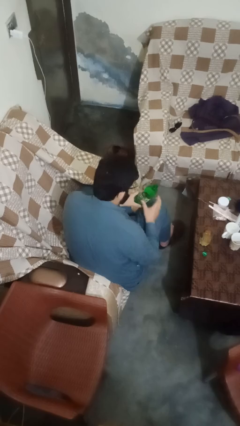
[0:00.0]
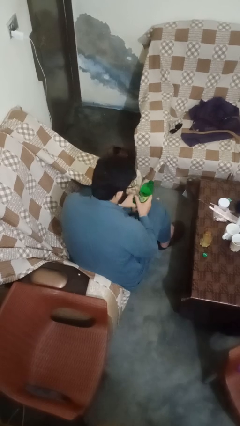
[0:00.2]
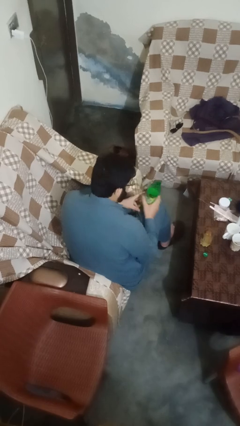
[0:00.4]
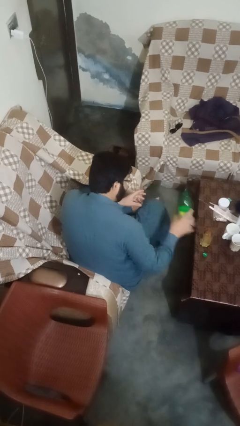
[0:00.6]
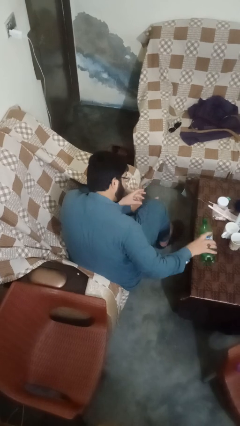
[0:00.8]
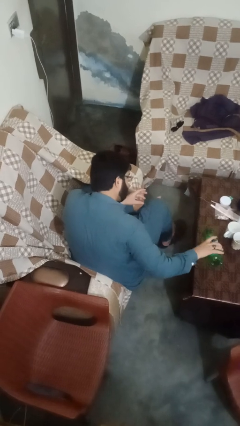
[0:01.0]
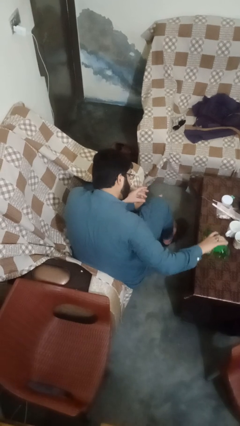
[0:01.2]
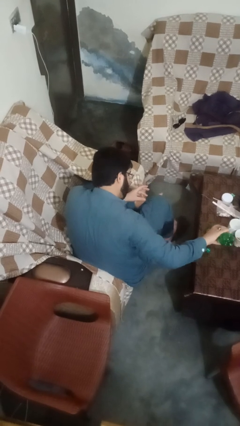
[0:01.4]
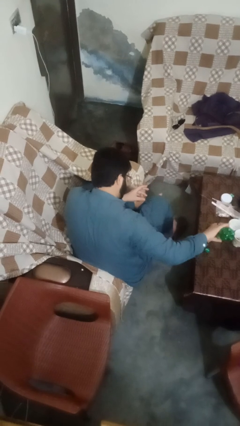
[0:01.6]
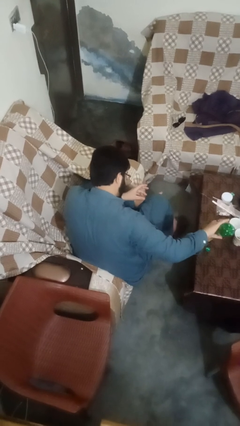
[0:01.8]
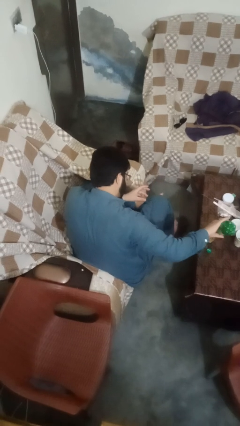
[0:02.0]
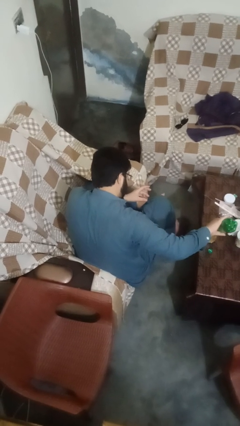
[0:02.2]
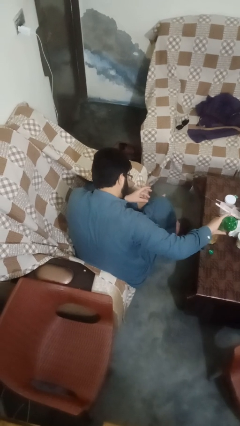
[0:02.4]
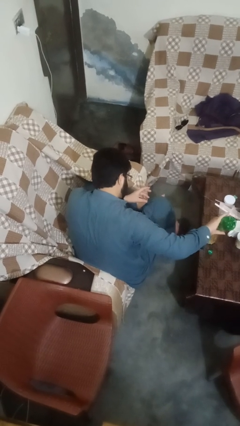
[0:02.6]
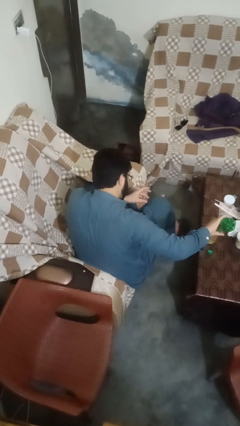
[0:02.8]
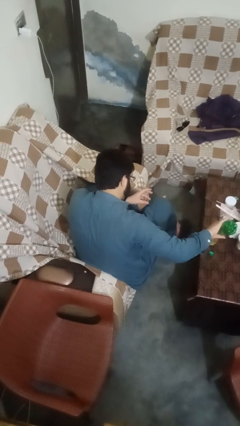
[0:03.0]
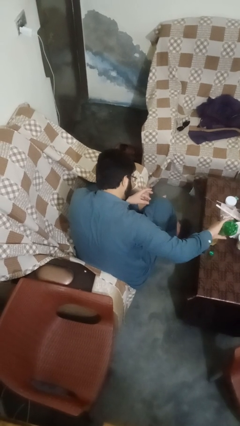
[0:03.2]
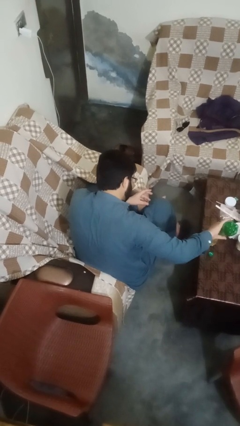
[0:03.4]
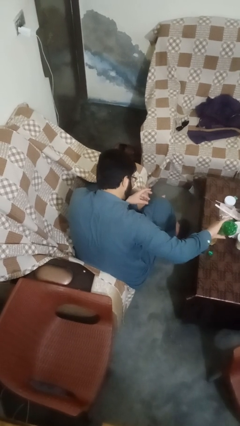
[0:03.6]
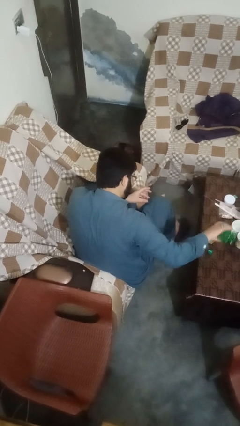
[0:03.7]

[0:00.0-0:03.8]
person pours liquid into cup

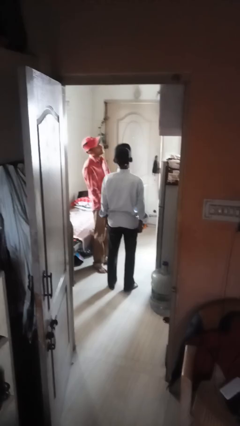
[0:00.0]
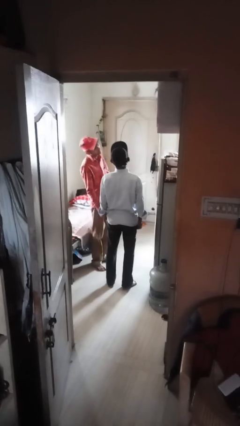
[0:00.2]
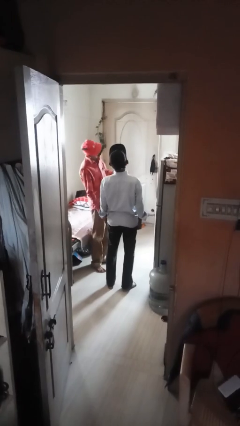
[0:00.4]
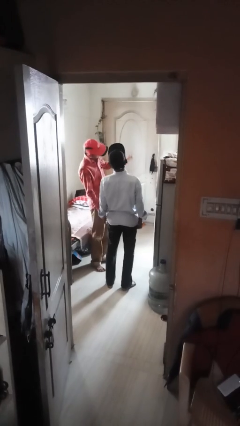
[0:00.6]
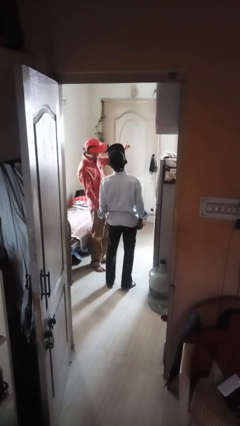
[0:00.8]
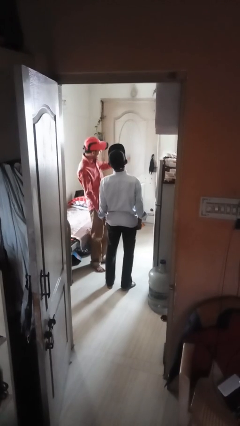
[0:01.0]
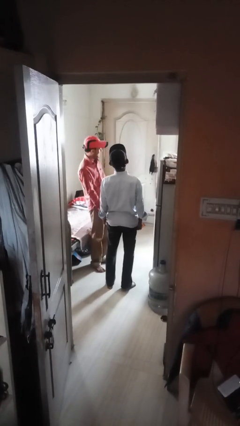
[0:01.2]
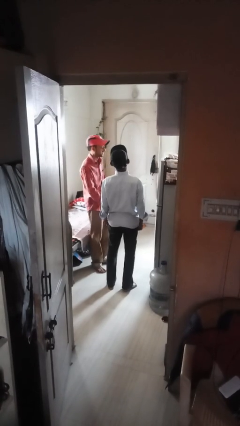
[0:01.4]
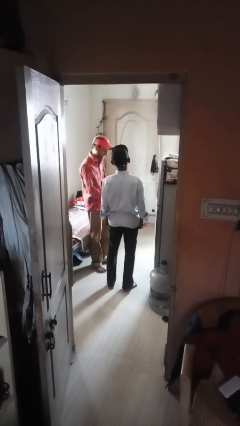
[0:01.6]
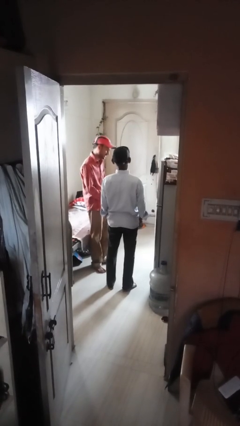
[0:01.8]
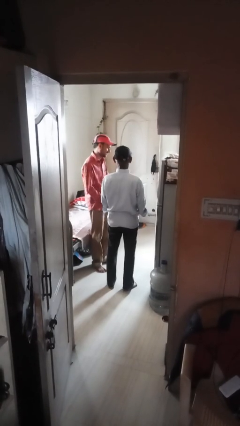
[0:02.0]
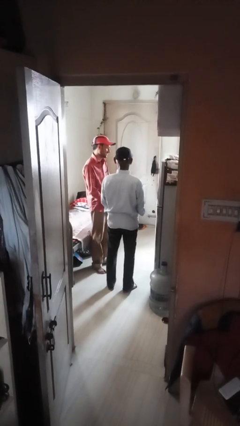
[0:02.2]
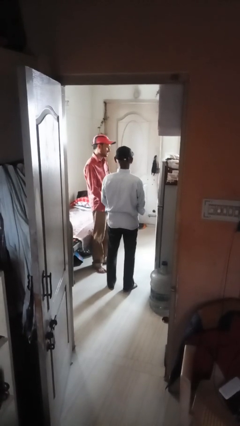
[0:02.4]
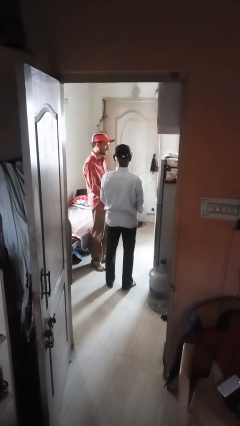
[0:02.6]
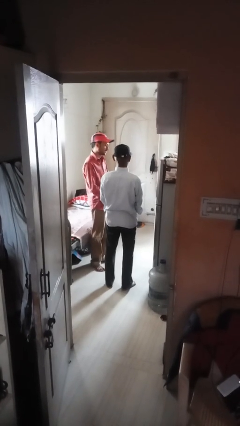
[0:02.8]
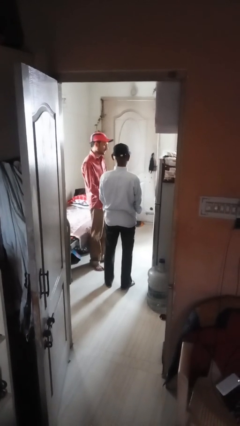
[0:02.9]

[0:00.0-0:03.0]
person laughs with person

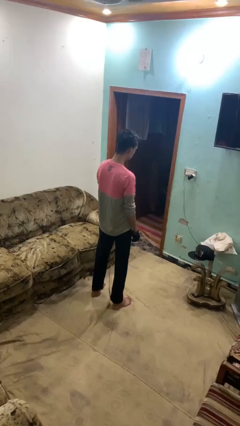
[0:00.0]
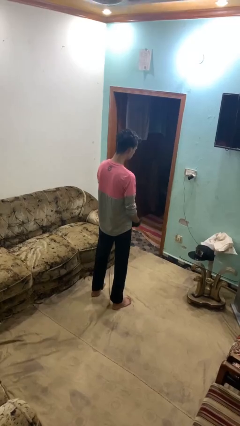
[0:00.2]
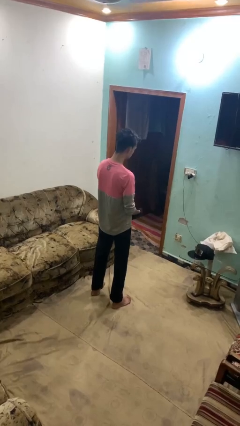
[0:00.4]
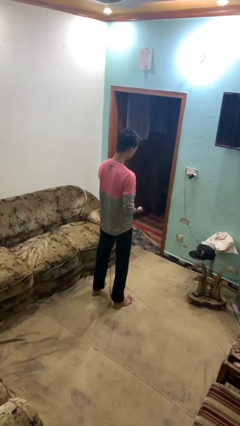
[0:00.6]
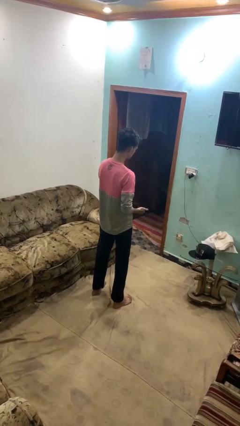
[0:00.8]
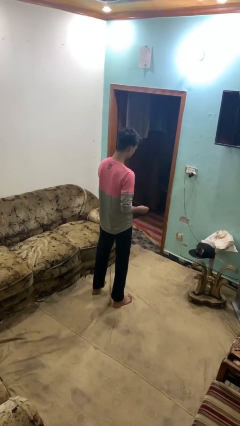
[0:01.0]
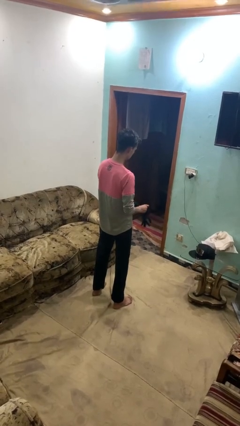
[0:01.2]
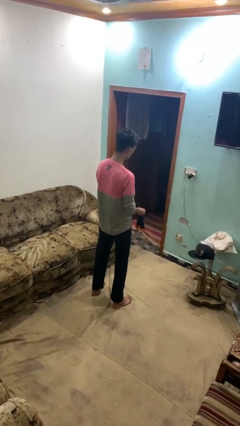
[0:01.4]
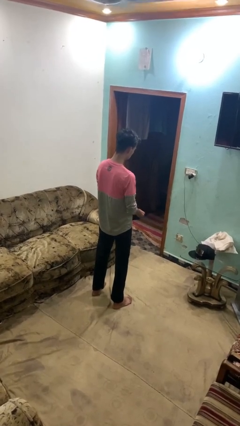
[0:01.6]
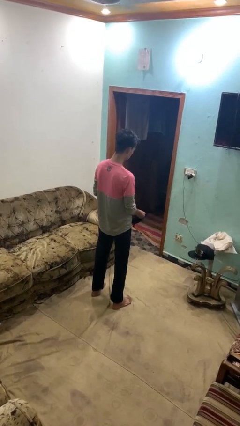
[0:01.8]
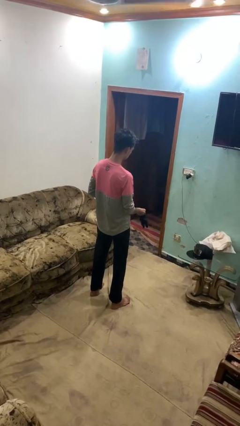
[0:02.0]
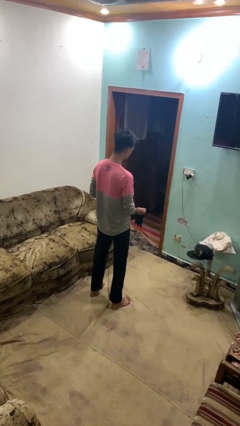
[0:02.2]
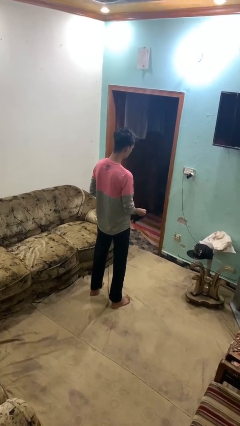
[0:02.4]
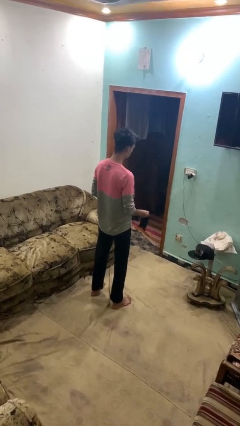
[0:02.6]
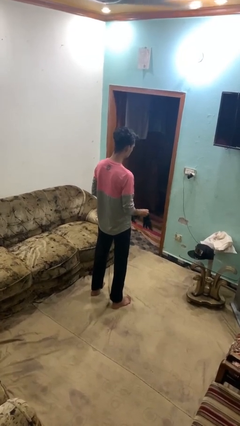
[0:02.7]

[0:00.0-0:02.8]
person takes off gloves

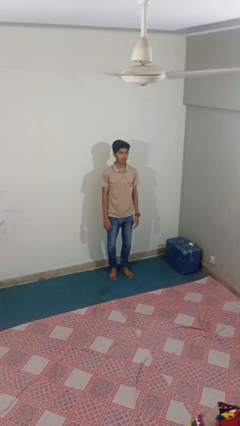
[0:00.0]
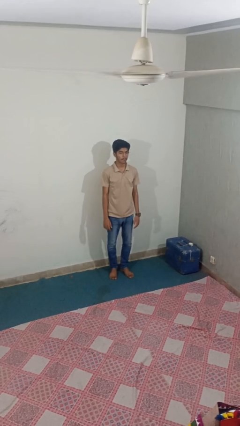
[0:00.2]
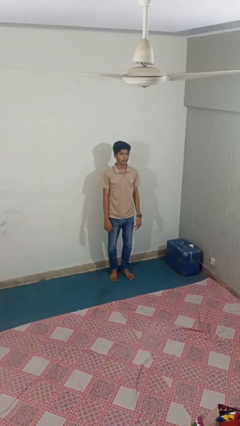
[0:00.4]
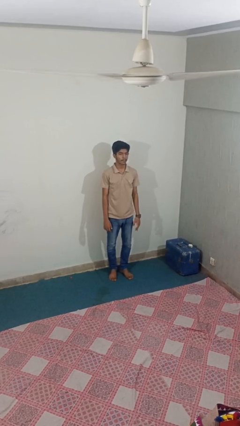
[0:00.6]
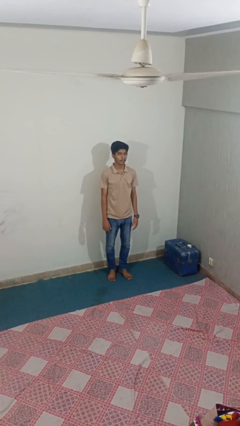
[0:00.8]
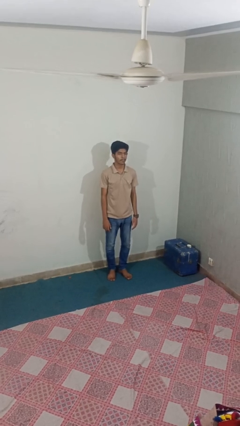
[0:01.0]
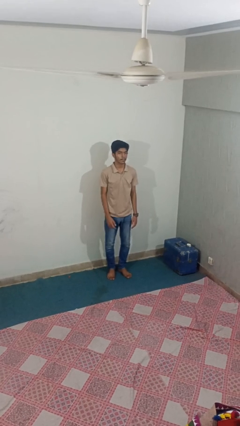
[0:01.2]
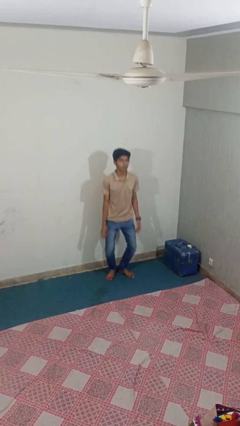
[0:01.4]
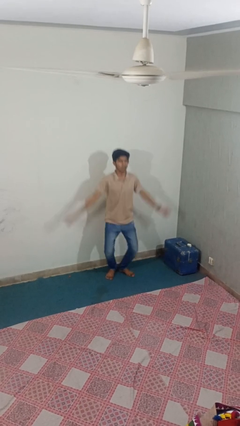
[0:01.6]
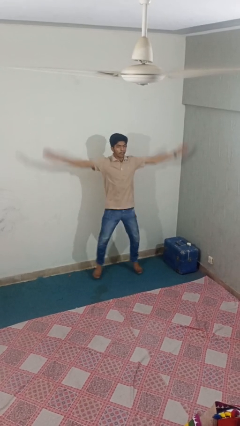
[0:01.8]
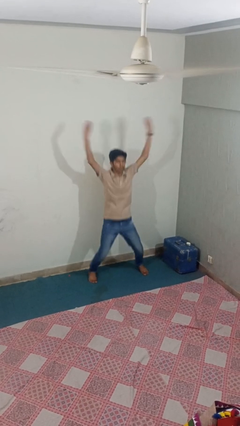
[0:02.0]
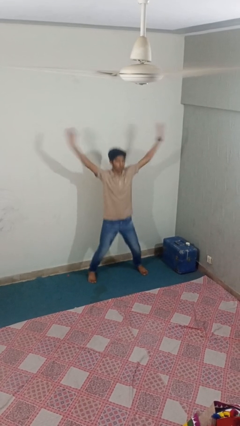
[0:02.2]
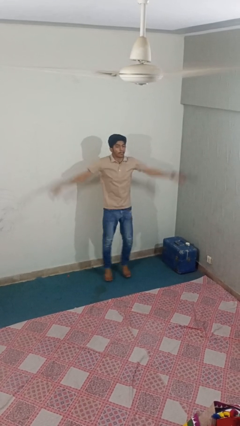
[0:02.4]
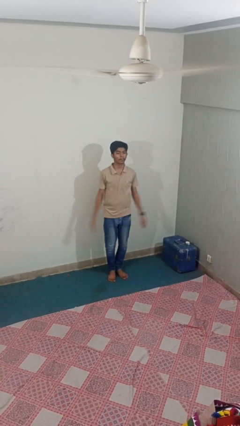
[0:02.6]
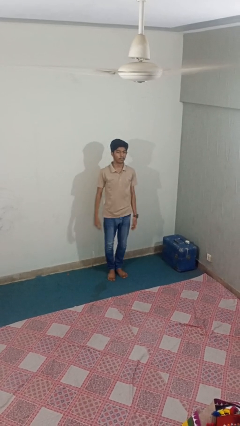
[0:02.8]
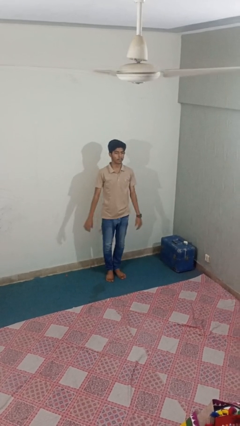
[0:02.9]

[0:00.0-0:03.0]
person exercises with jumping jacks

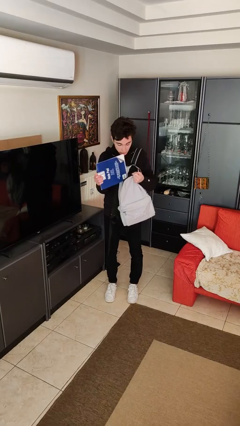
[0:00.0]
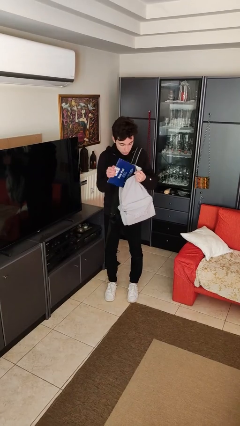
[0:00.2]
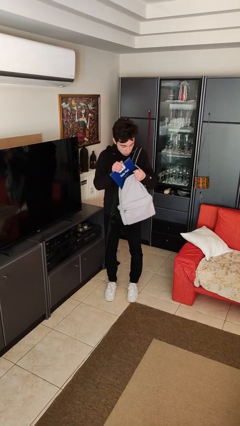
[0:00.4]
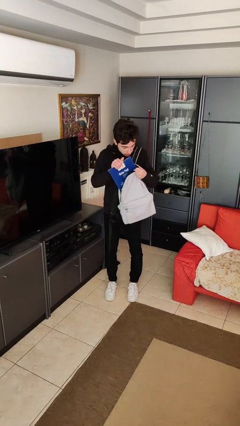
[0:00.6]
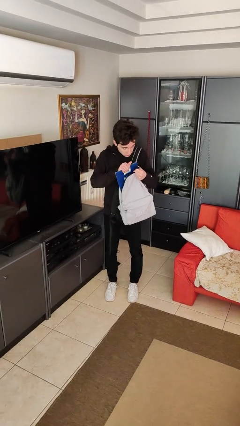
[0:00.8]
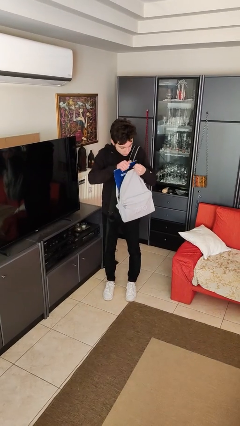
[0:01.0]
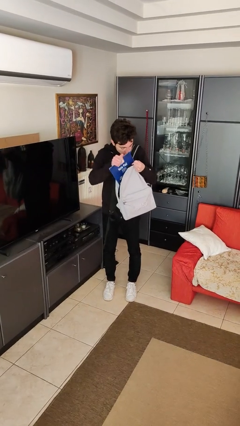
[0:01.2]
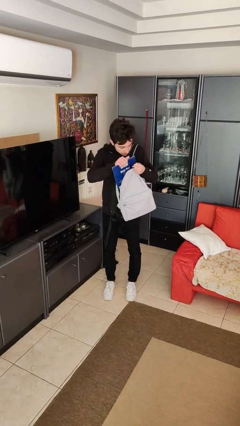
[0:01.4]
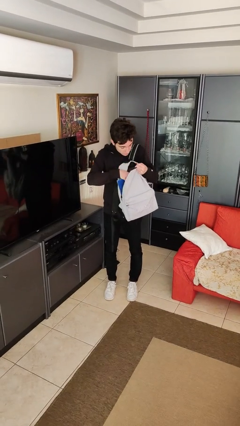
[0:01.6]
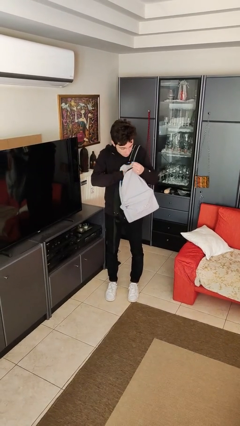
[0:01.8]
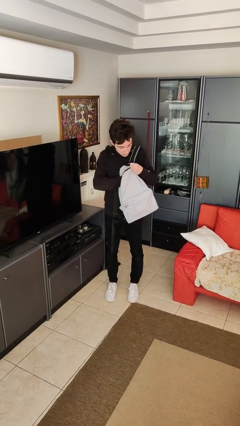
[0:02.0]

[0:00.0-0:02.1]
person puts object into backpack

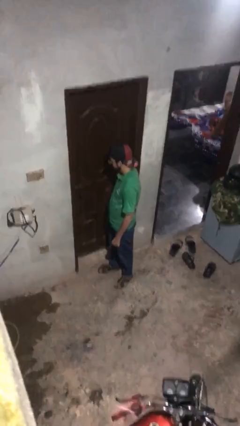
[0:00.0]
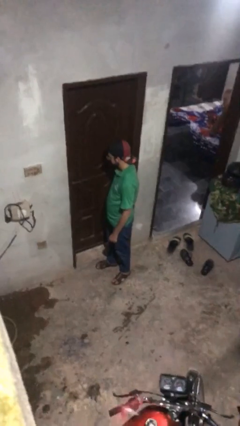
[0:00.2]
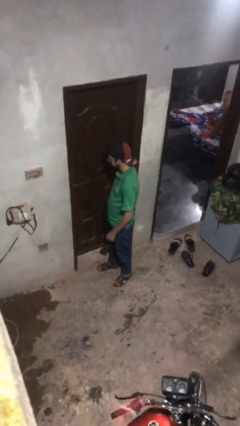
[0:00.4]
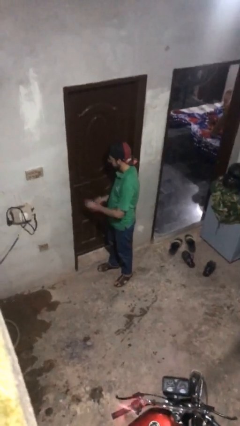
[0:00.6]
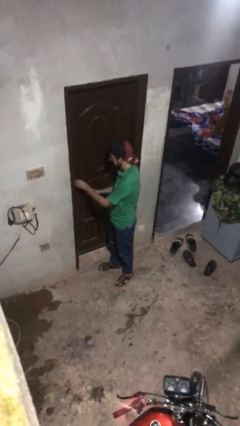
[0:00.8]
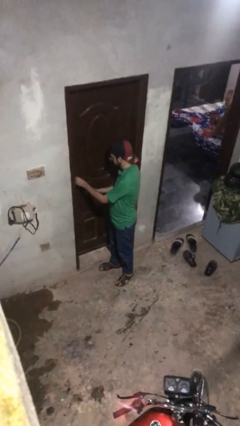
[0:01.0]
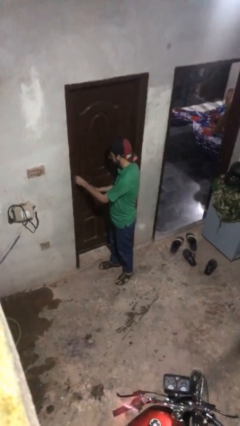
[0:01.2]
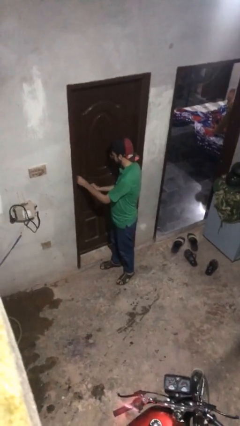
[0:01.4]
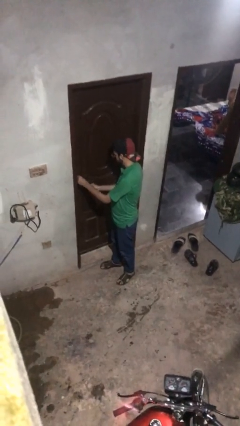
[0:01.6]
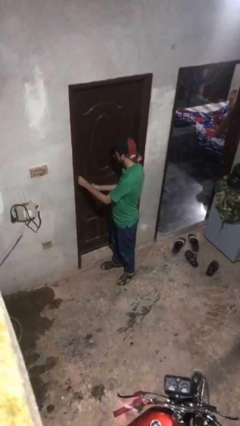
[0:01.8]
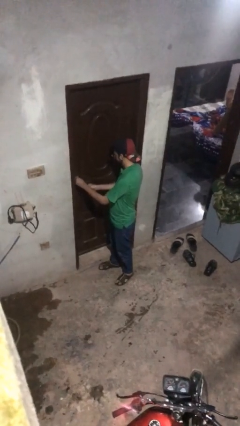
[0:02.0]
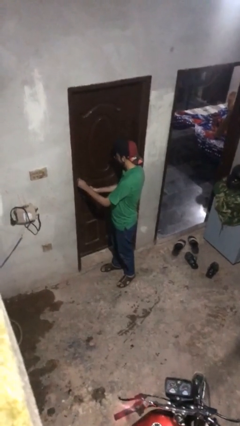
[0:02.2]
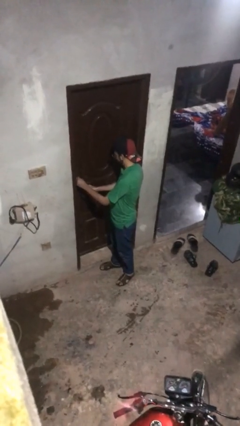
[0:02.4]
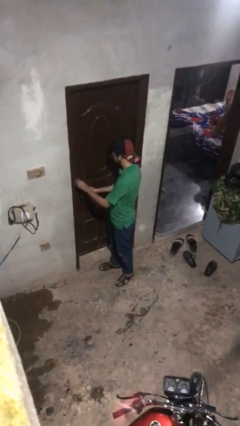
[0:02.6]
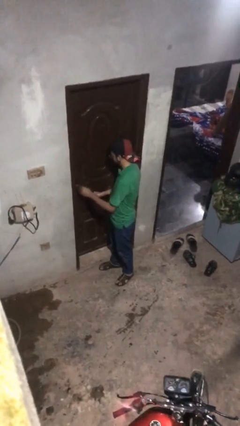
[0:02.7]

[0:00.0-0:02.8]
person locks door with keys

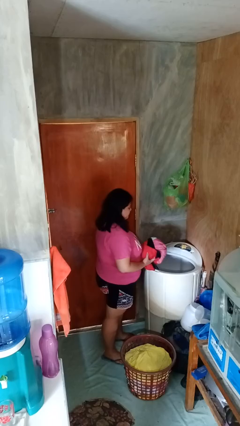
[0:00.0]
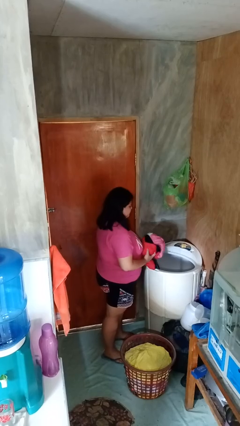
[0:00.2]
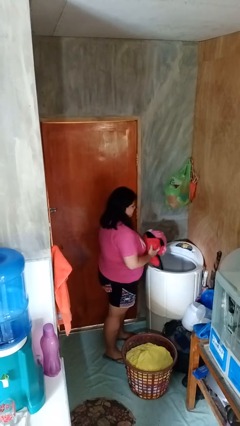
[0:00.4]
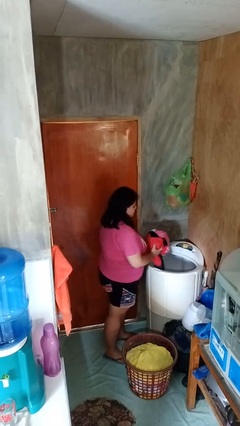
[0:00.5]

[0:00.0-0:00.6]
person loads clotheswasher
